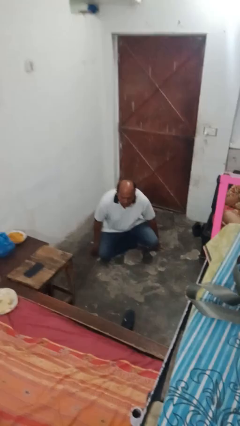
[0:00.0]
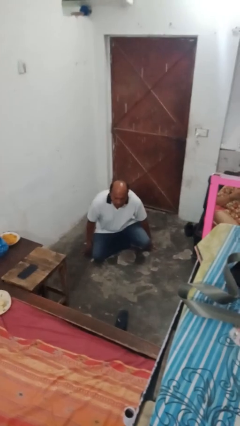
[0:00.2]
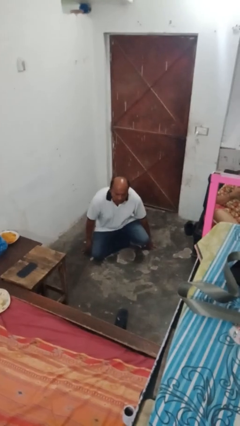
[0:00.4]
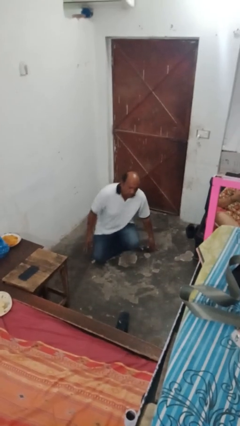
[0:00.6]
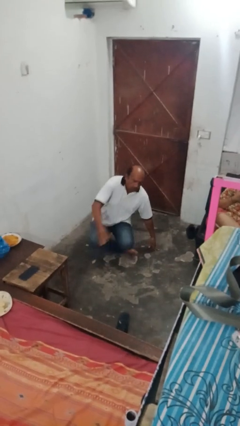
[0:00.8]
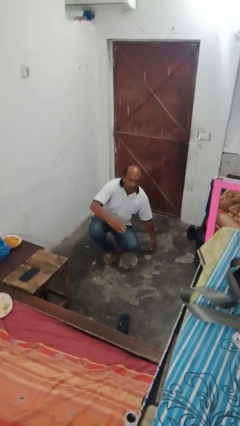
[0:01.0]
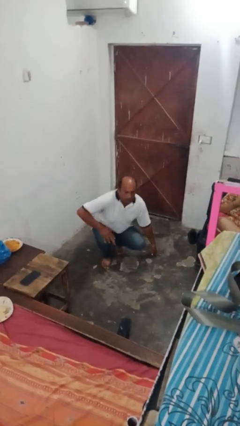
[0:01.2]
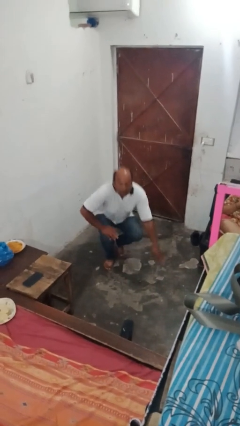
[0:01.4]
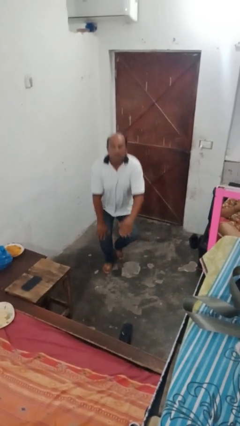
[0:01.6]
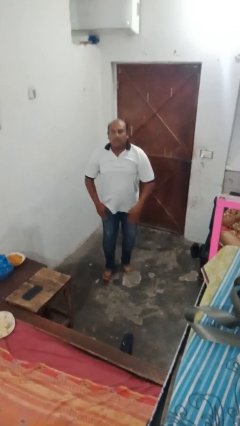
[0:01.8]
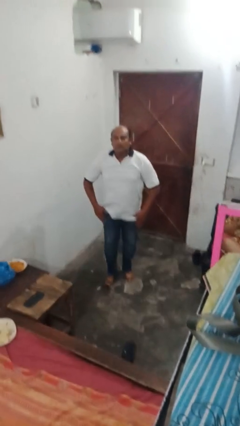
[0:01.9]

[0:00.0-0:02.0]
person stands up from floor

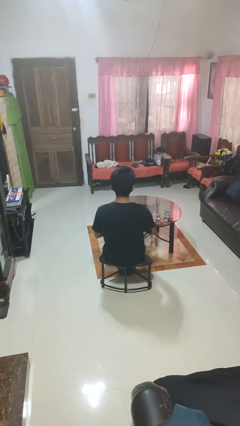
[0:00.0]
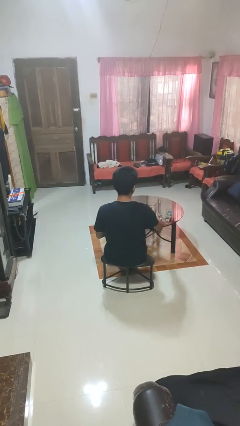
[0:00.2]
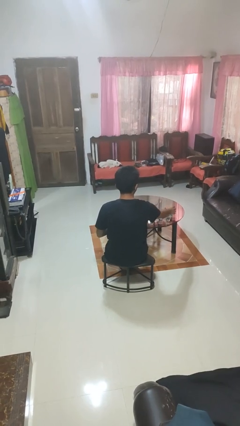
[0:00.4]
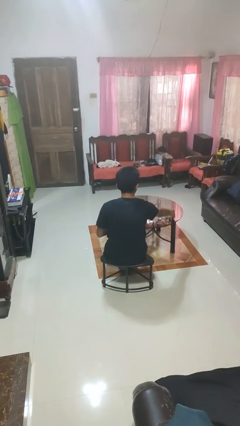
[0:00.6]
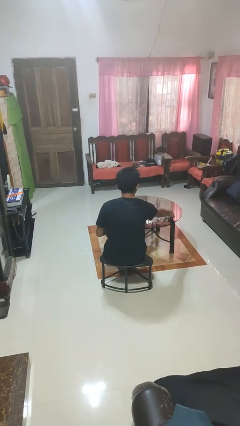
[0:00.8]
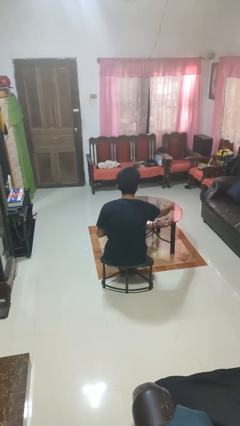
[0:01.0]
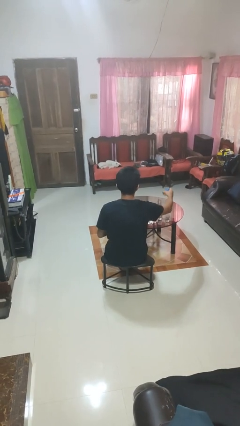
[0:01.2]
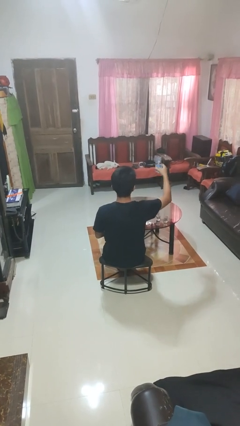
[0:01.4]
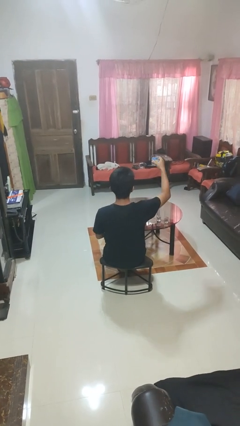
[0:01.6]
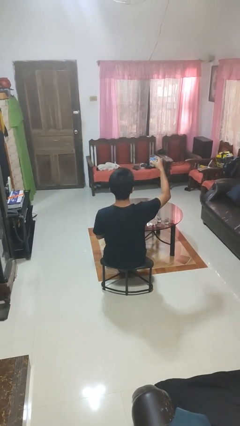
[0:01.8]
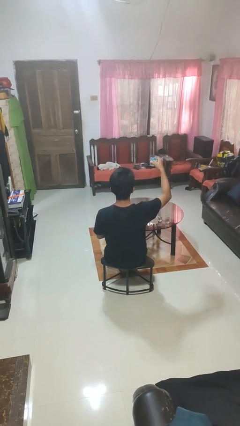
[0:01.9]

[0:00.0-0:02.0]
person picks up object from table

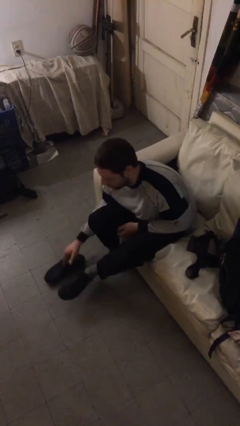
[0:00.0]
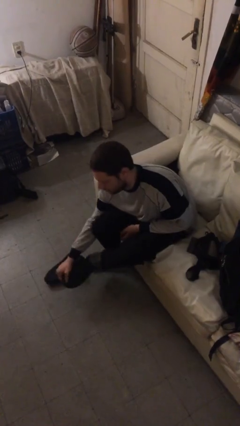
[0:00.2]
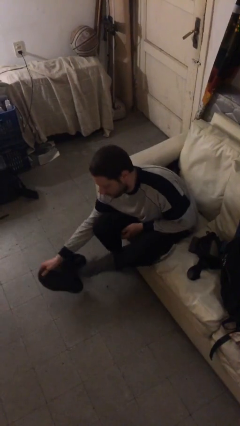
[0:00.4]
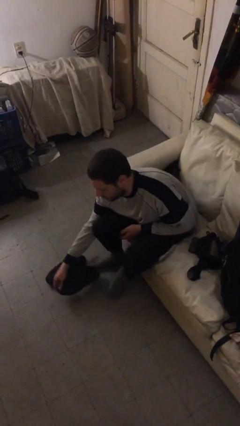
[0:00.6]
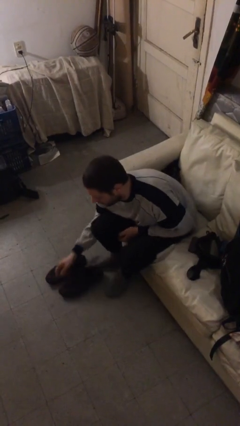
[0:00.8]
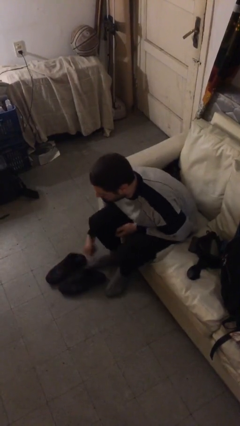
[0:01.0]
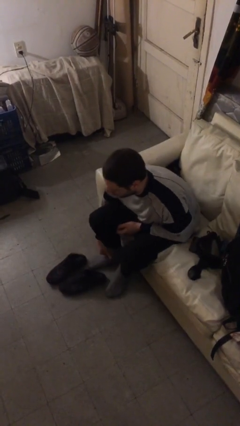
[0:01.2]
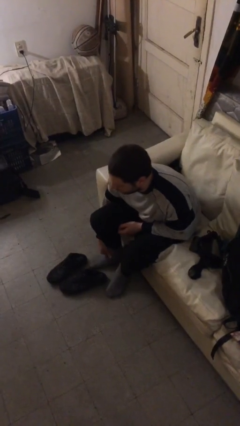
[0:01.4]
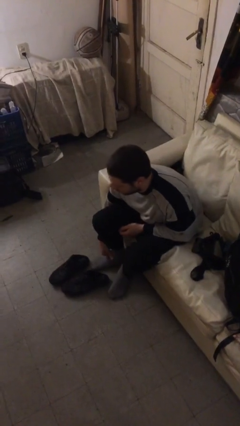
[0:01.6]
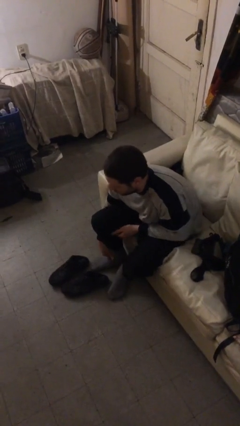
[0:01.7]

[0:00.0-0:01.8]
person takes off shoes

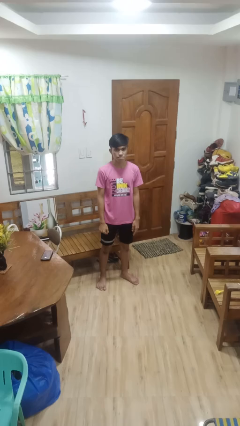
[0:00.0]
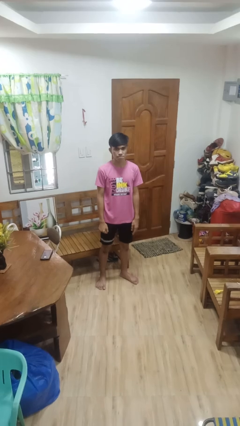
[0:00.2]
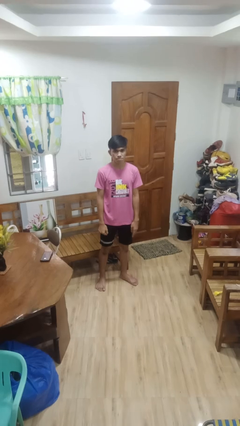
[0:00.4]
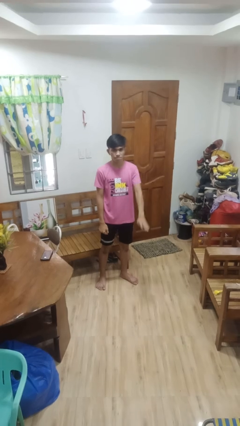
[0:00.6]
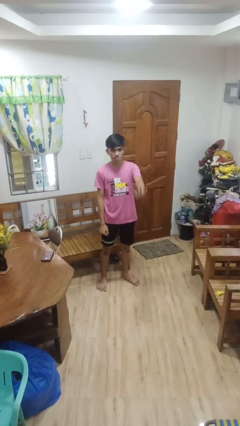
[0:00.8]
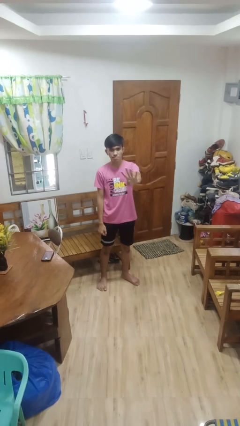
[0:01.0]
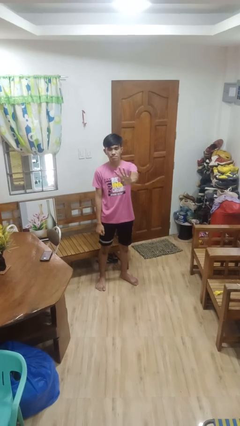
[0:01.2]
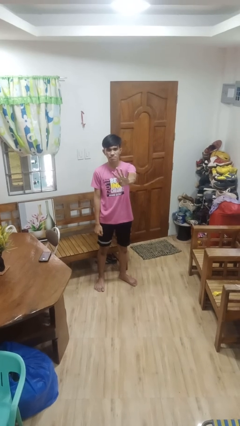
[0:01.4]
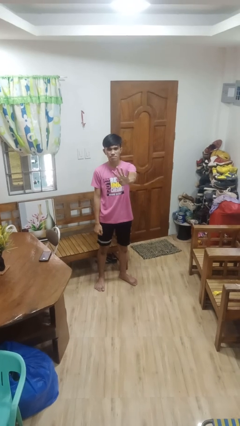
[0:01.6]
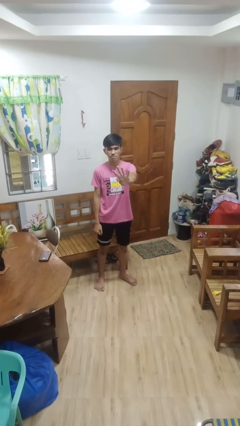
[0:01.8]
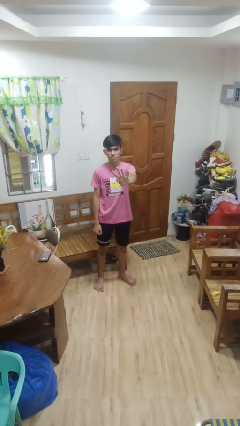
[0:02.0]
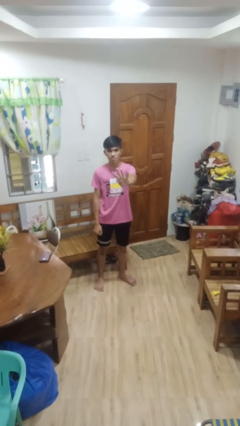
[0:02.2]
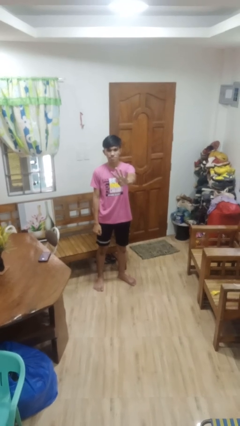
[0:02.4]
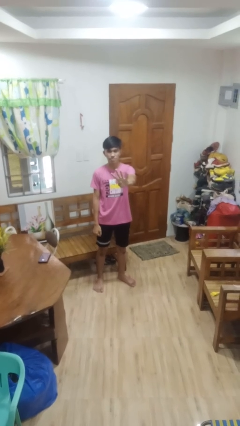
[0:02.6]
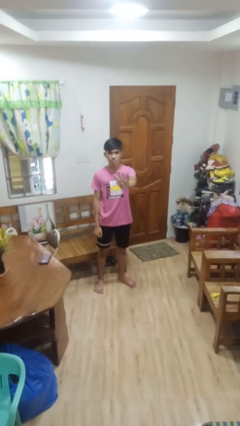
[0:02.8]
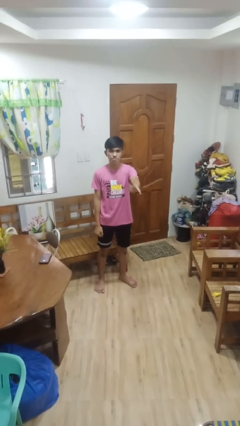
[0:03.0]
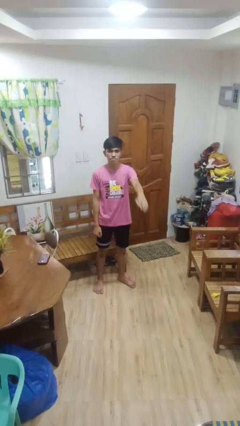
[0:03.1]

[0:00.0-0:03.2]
person gestures number four

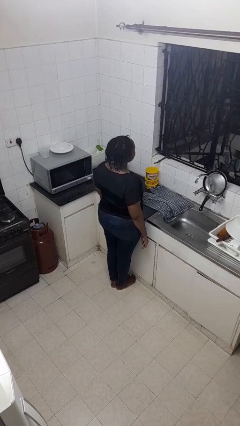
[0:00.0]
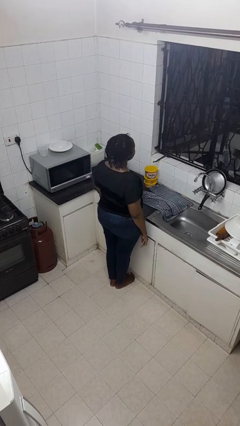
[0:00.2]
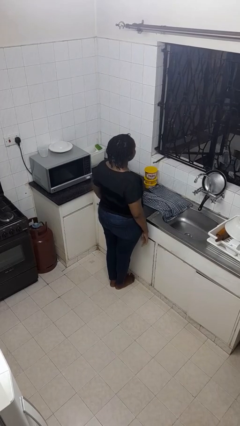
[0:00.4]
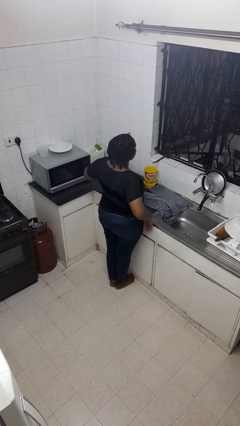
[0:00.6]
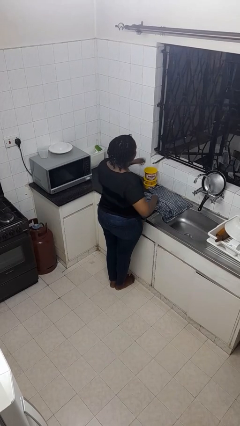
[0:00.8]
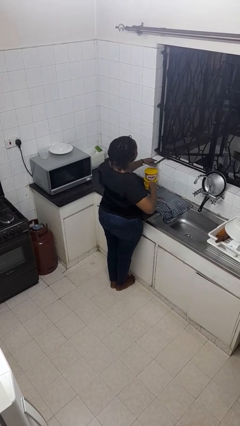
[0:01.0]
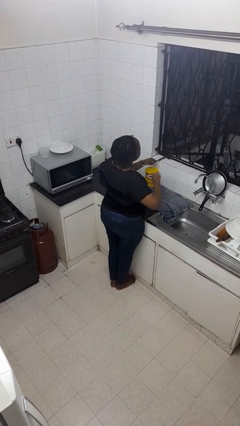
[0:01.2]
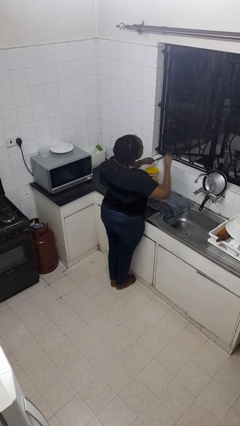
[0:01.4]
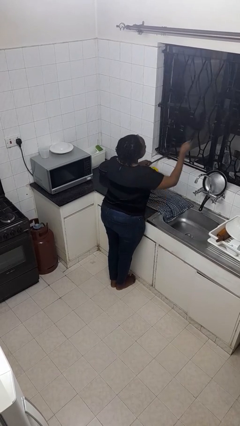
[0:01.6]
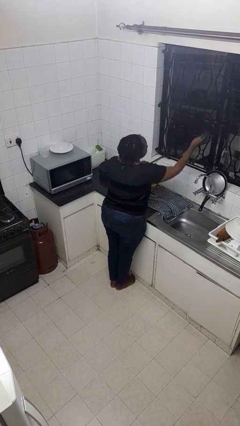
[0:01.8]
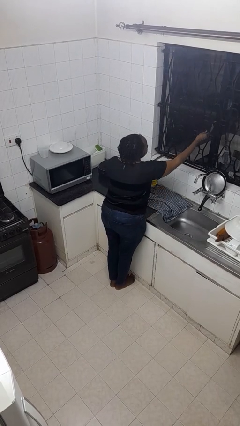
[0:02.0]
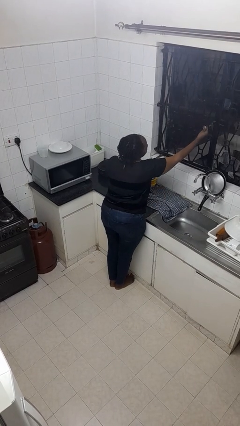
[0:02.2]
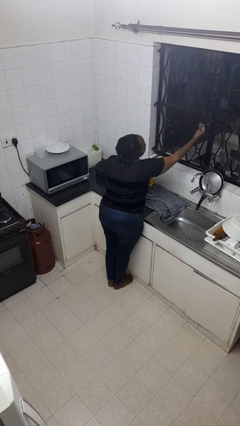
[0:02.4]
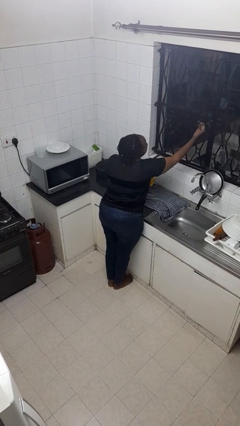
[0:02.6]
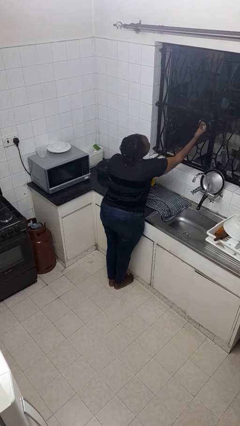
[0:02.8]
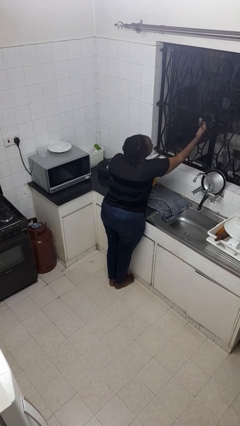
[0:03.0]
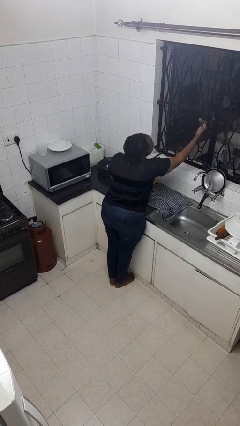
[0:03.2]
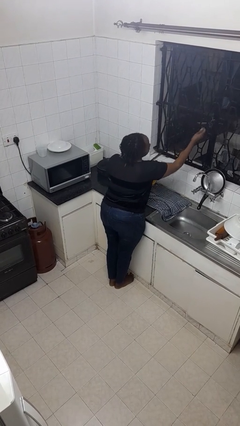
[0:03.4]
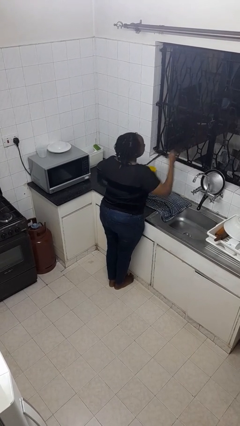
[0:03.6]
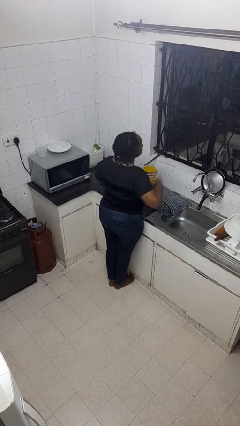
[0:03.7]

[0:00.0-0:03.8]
person closes home window

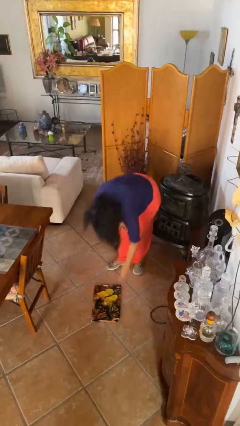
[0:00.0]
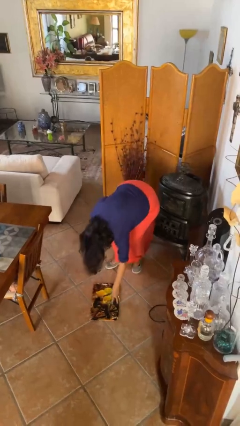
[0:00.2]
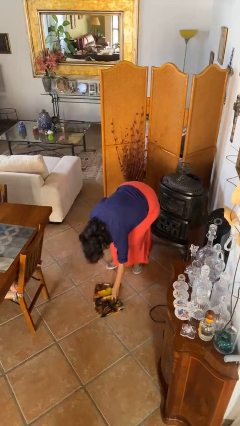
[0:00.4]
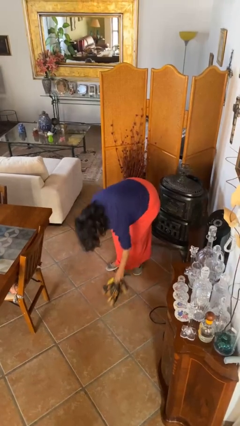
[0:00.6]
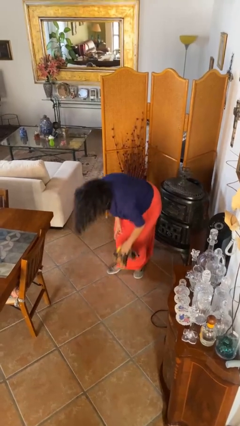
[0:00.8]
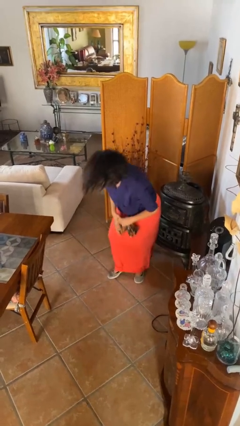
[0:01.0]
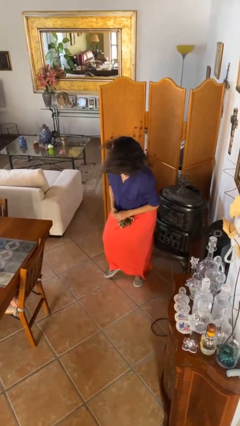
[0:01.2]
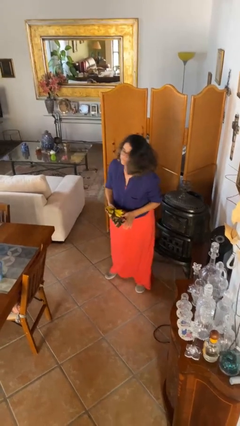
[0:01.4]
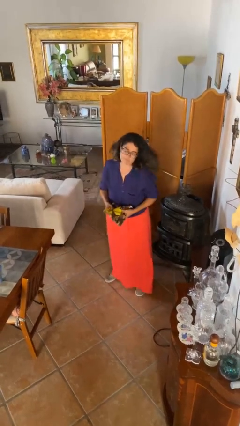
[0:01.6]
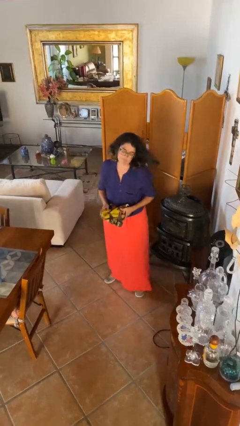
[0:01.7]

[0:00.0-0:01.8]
person picks up object from floor

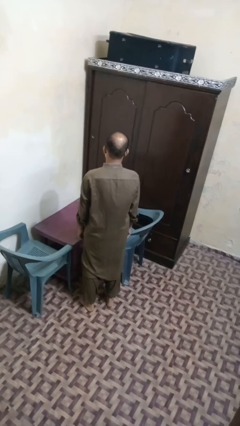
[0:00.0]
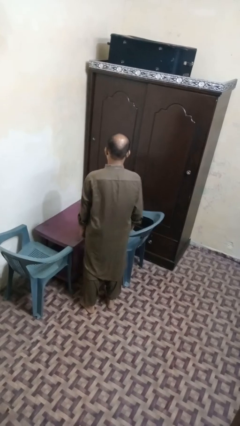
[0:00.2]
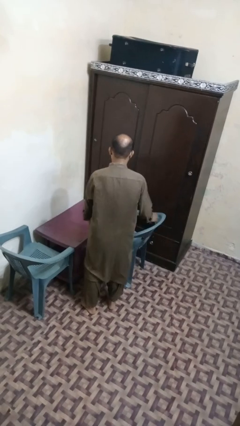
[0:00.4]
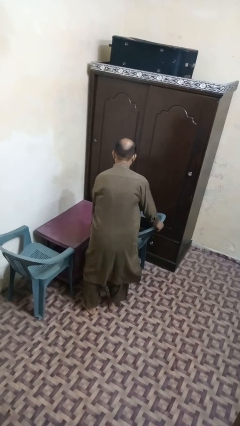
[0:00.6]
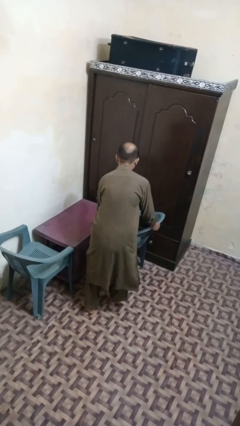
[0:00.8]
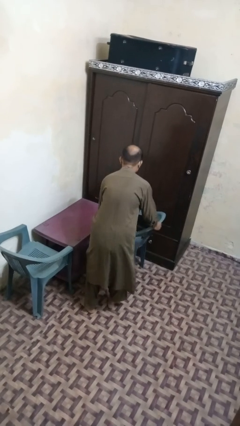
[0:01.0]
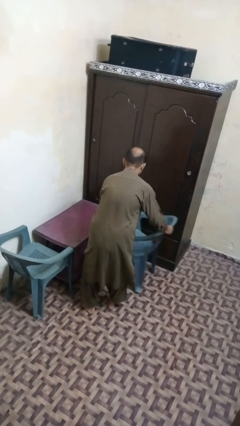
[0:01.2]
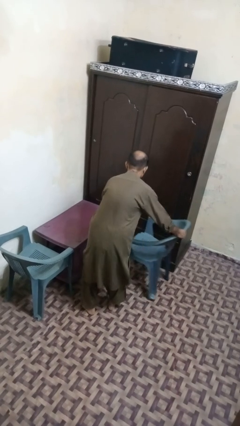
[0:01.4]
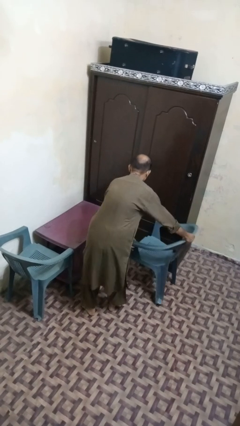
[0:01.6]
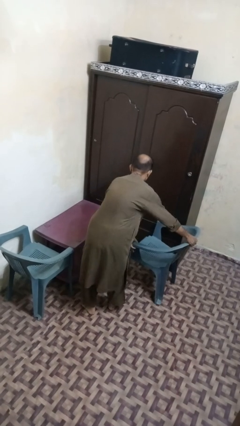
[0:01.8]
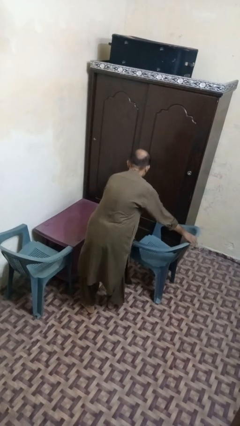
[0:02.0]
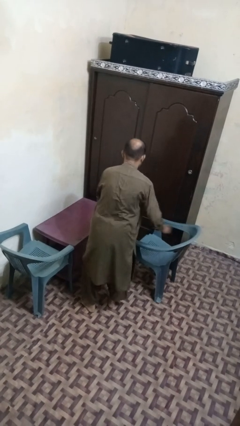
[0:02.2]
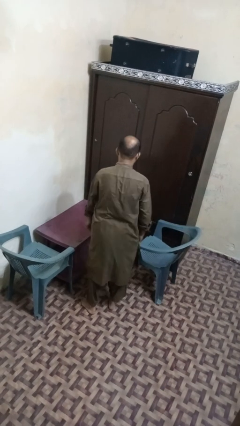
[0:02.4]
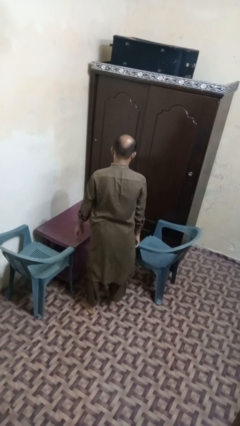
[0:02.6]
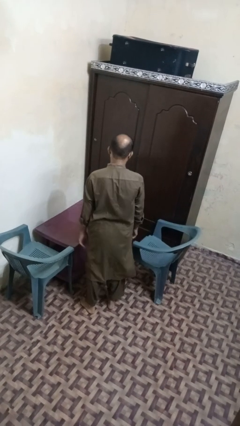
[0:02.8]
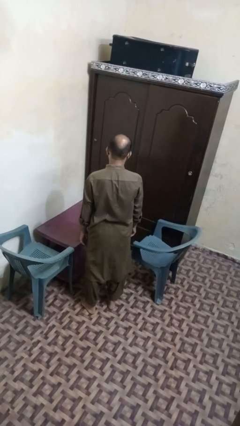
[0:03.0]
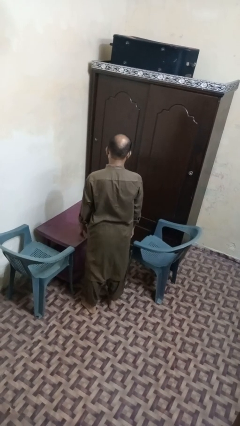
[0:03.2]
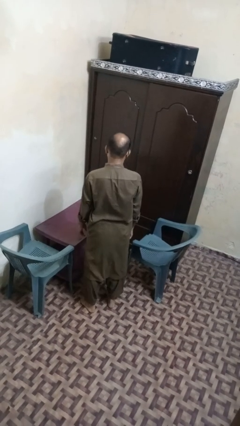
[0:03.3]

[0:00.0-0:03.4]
person pulls out chair
